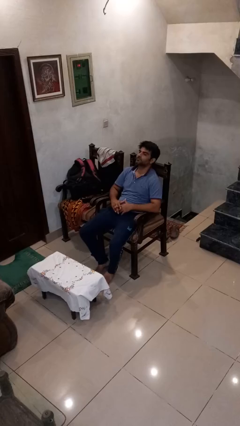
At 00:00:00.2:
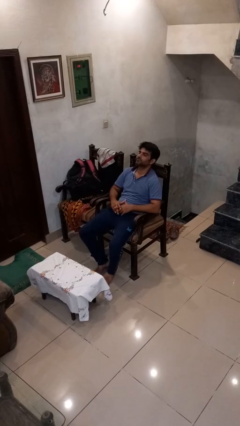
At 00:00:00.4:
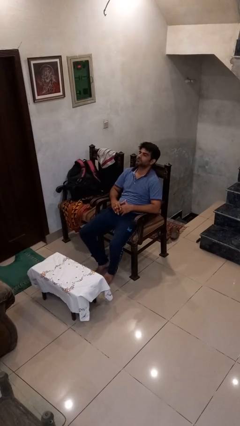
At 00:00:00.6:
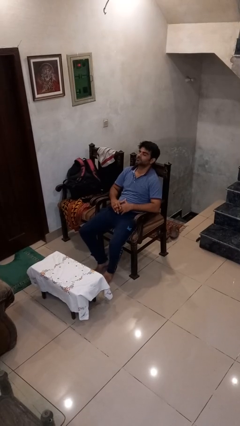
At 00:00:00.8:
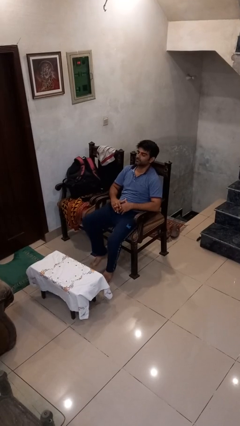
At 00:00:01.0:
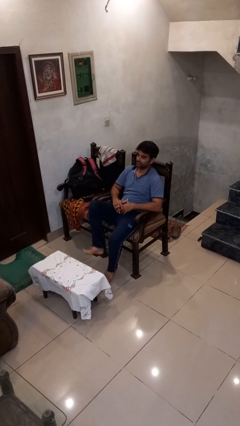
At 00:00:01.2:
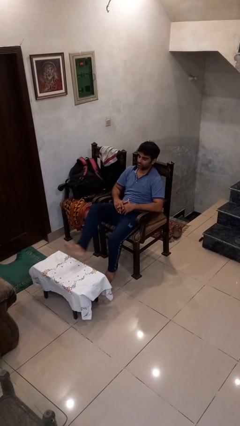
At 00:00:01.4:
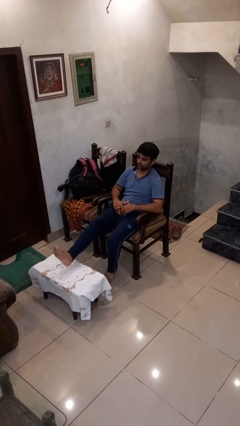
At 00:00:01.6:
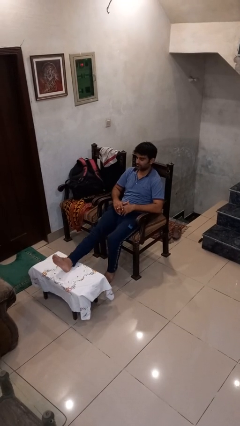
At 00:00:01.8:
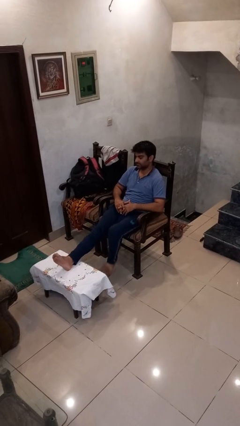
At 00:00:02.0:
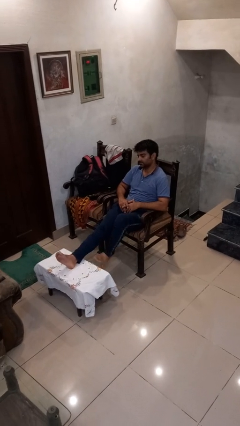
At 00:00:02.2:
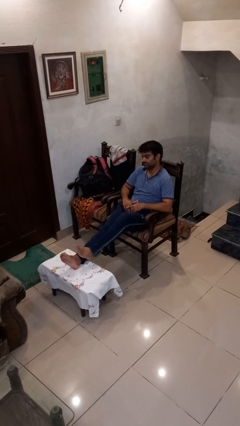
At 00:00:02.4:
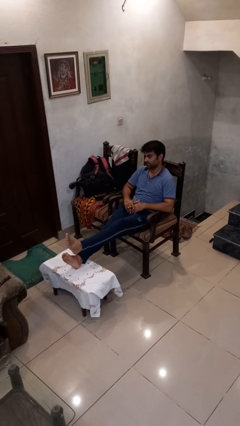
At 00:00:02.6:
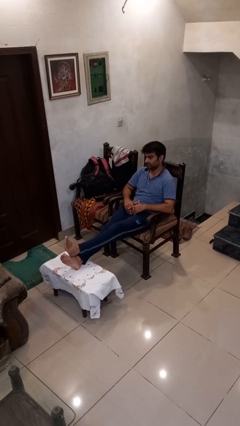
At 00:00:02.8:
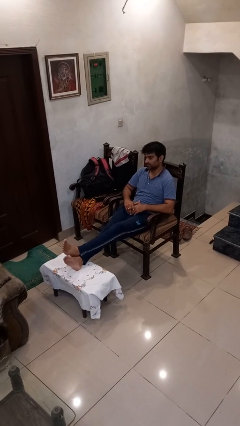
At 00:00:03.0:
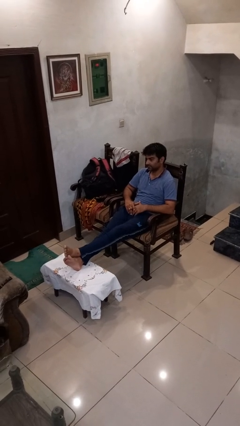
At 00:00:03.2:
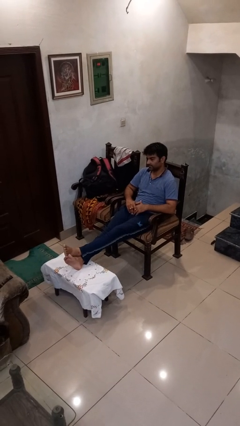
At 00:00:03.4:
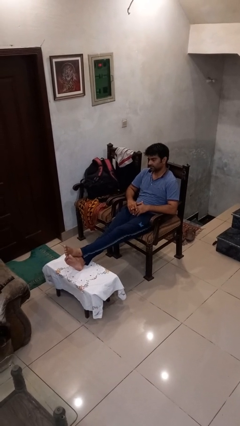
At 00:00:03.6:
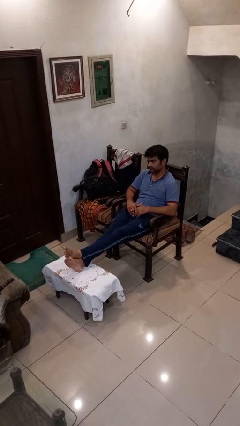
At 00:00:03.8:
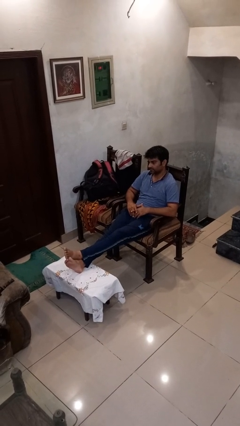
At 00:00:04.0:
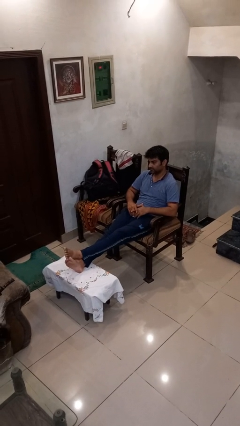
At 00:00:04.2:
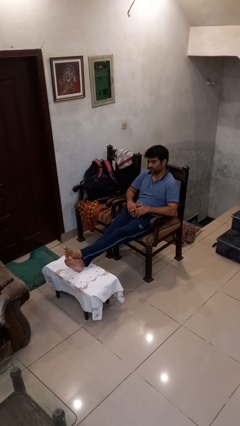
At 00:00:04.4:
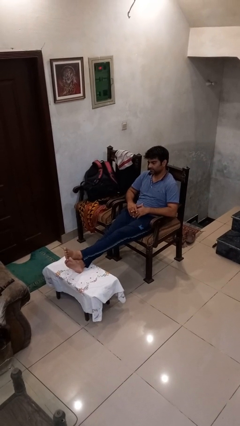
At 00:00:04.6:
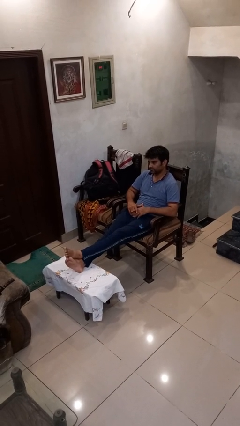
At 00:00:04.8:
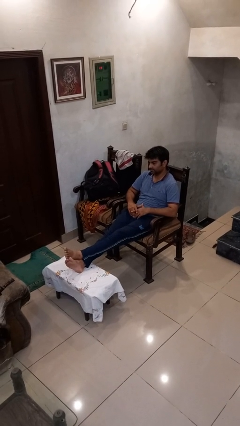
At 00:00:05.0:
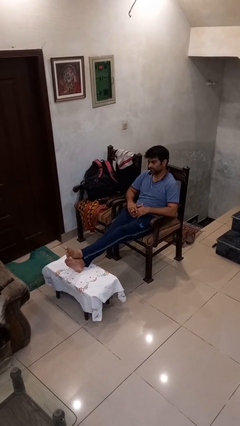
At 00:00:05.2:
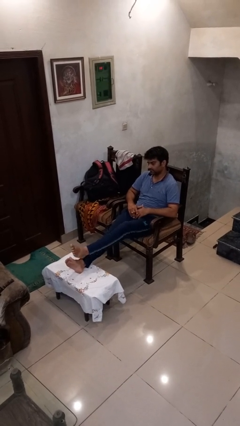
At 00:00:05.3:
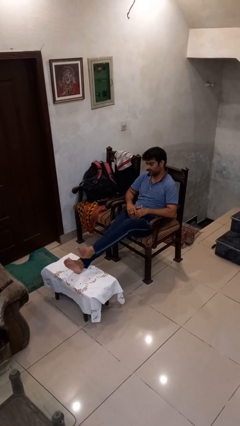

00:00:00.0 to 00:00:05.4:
person puts feet up

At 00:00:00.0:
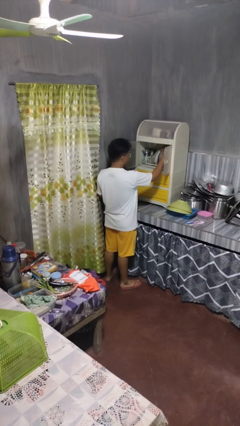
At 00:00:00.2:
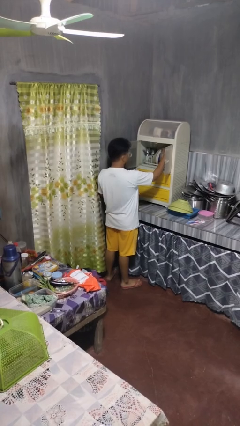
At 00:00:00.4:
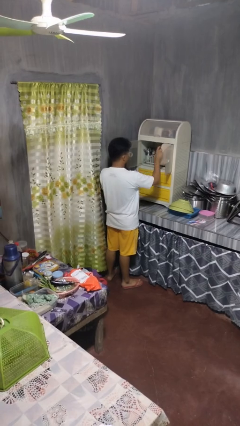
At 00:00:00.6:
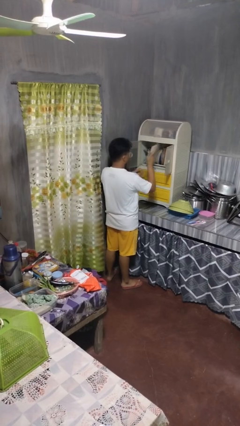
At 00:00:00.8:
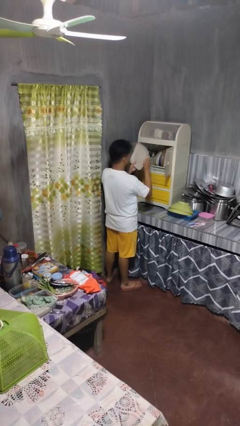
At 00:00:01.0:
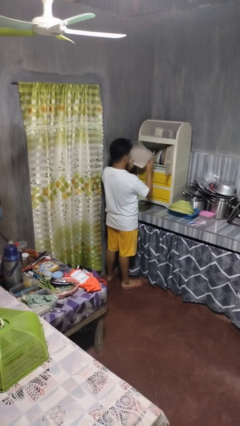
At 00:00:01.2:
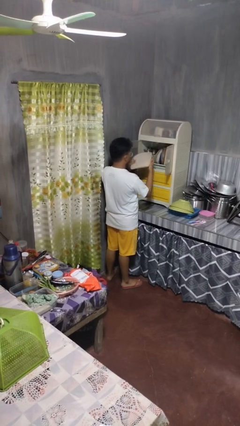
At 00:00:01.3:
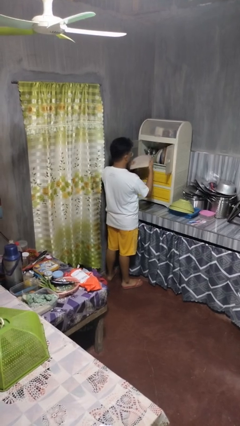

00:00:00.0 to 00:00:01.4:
person takes object from cabinet

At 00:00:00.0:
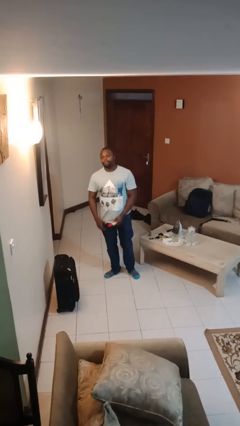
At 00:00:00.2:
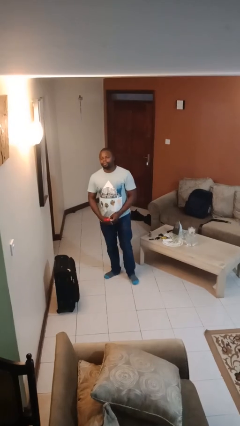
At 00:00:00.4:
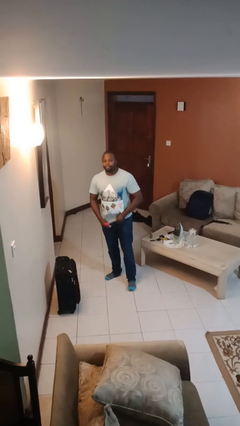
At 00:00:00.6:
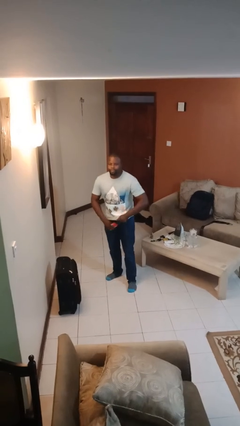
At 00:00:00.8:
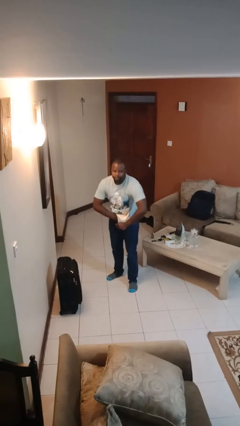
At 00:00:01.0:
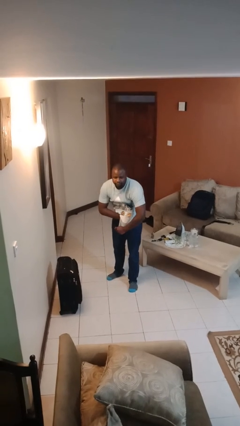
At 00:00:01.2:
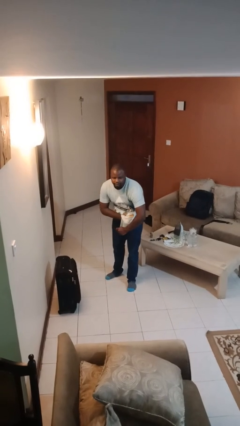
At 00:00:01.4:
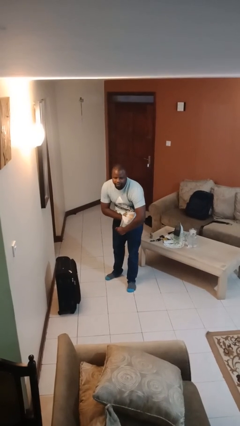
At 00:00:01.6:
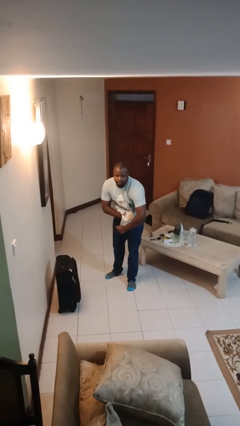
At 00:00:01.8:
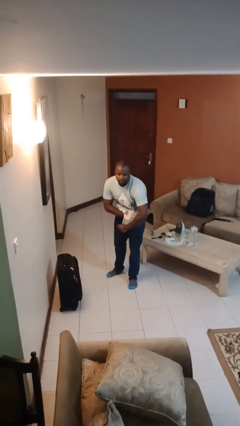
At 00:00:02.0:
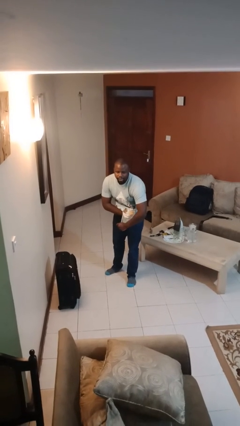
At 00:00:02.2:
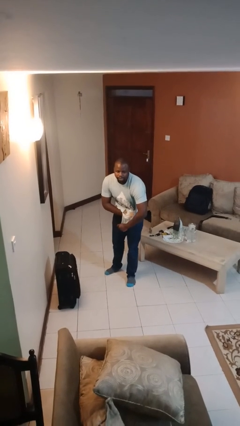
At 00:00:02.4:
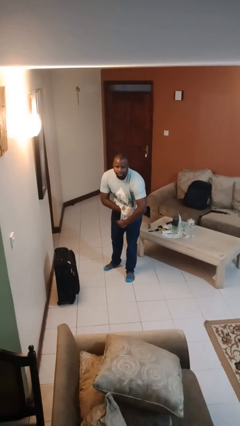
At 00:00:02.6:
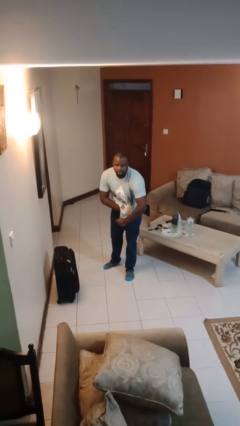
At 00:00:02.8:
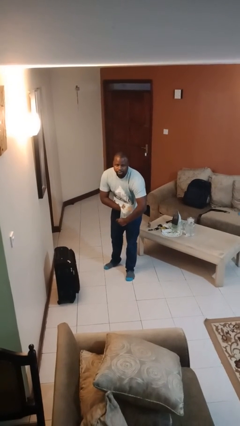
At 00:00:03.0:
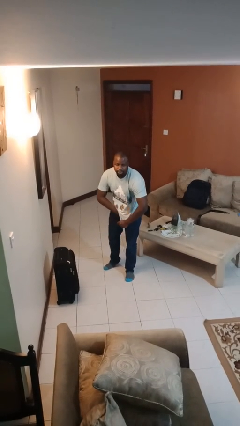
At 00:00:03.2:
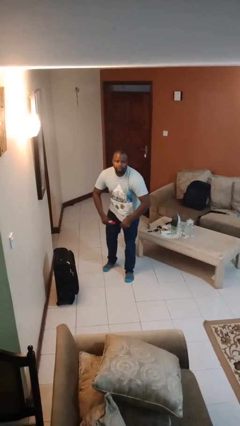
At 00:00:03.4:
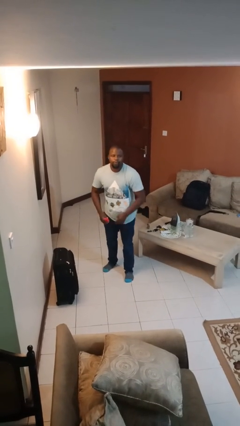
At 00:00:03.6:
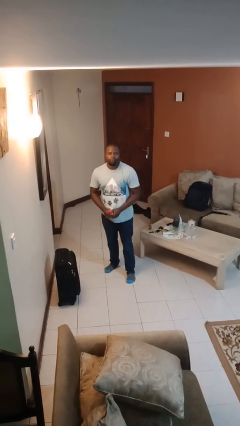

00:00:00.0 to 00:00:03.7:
person applies deodorant

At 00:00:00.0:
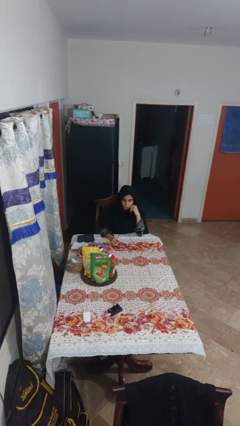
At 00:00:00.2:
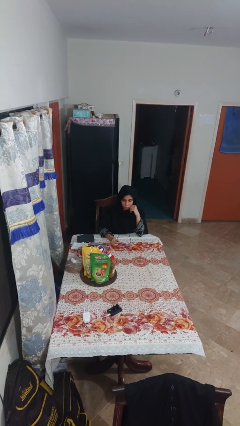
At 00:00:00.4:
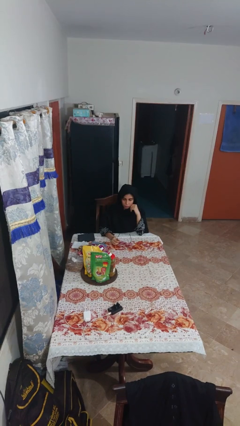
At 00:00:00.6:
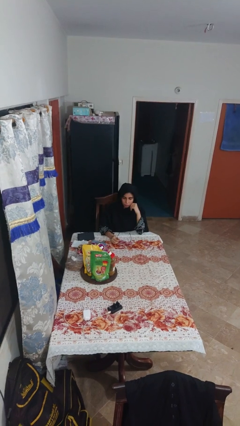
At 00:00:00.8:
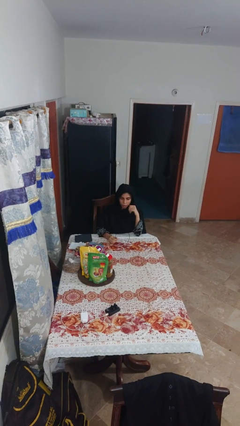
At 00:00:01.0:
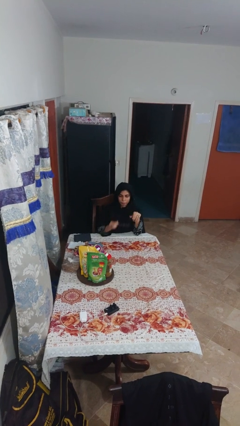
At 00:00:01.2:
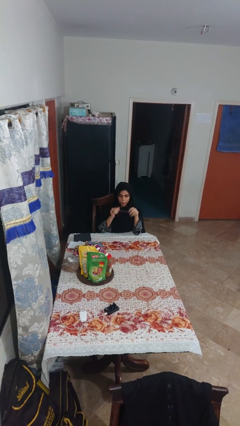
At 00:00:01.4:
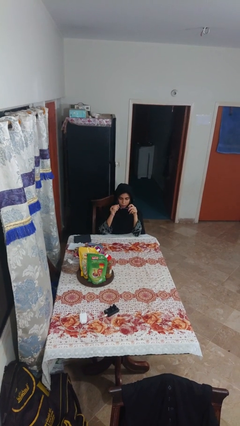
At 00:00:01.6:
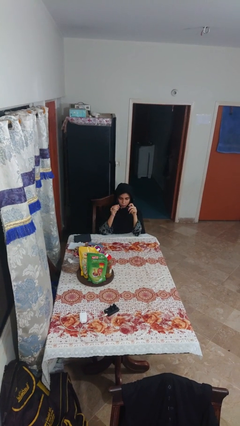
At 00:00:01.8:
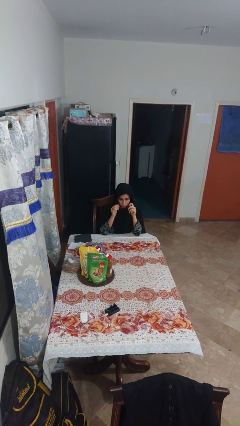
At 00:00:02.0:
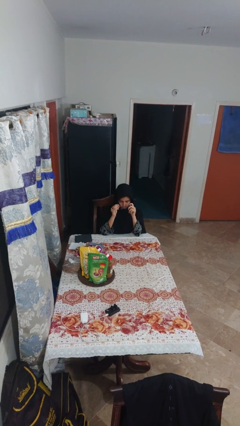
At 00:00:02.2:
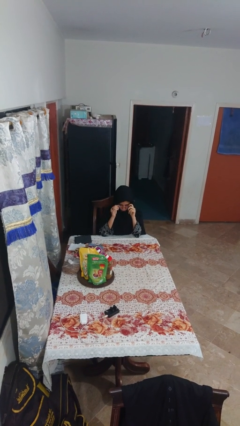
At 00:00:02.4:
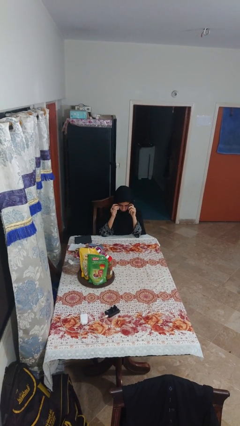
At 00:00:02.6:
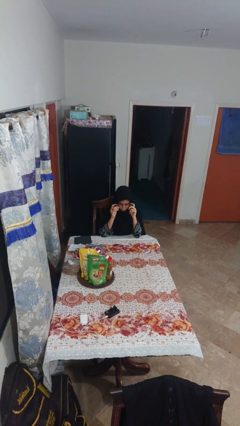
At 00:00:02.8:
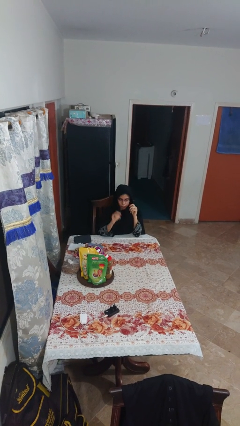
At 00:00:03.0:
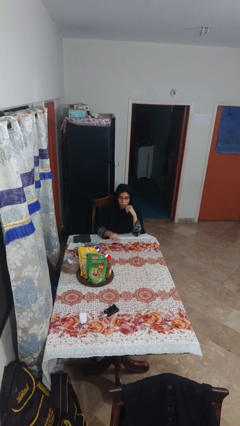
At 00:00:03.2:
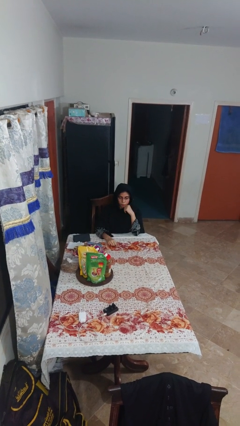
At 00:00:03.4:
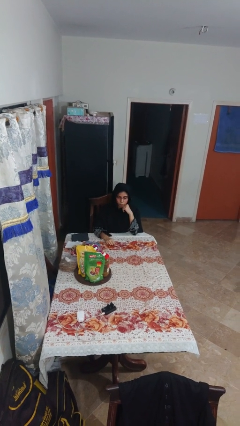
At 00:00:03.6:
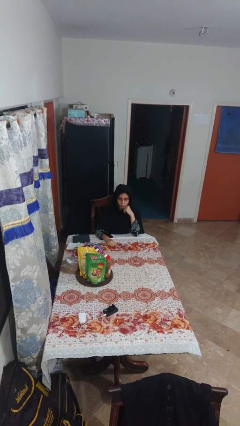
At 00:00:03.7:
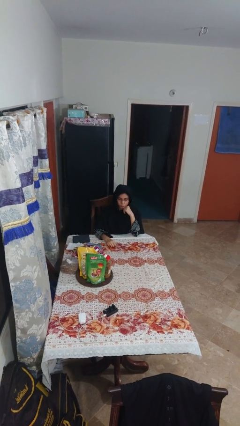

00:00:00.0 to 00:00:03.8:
person puts on glasses

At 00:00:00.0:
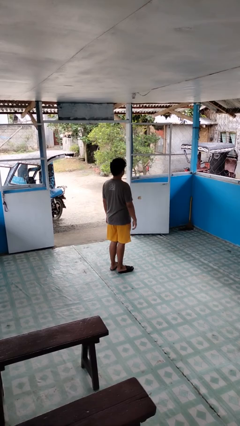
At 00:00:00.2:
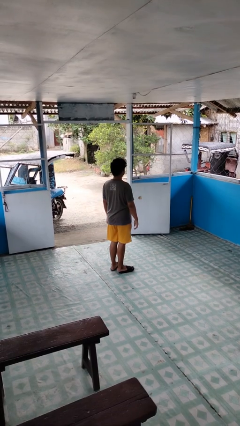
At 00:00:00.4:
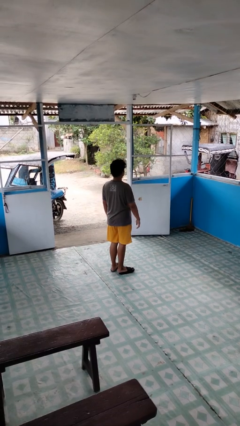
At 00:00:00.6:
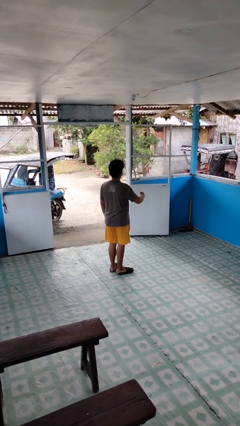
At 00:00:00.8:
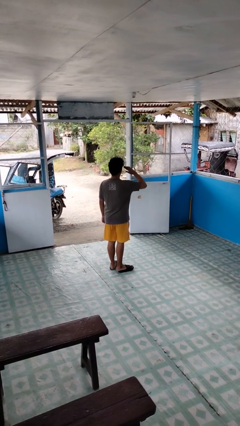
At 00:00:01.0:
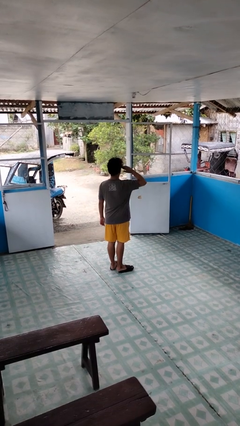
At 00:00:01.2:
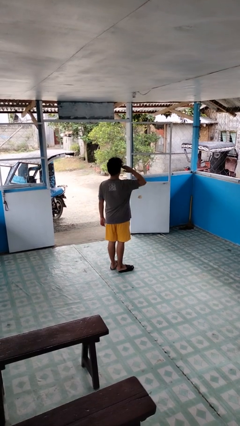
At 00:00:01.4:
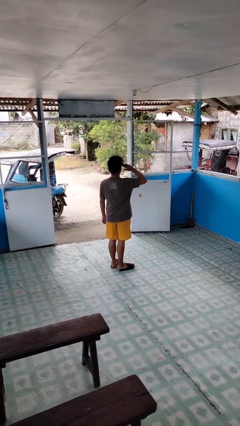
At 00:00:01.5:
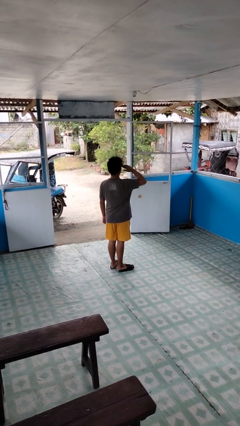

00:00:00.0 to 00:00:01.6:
person salutes

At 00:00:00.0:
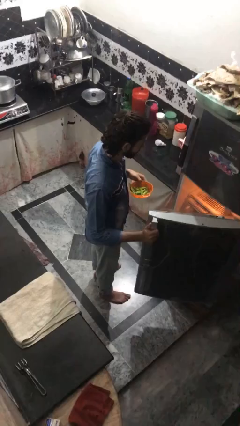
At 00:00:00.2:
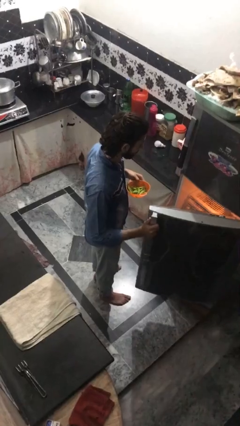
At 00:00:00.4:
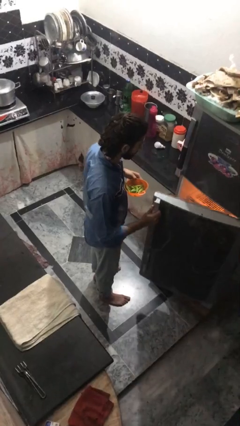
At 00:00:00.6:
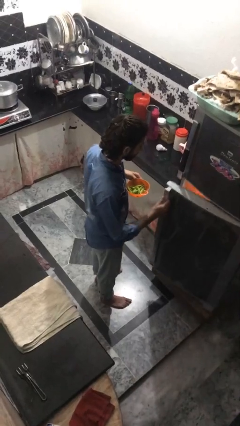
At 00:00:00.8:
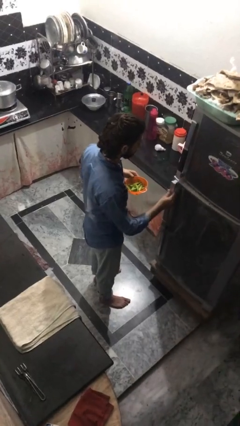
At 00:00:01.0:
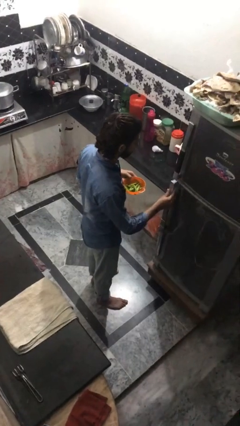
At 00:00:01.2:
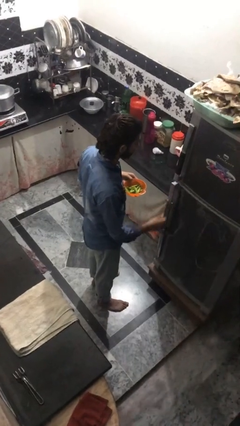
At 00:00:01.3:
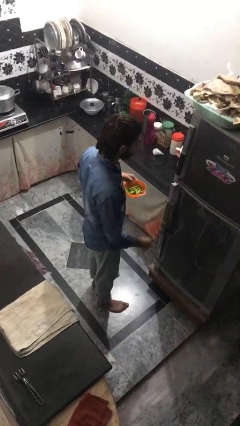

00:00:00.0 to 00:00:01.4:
person closes refrigerator
